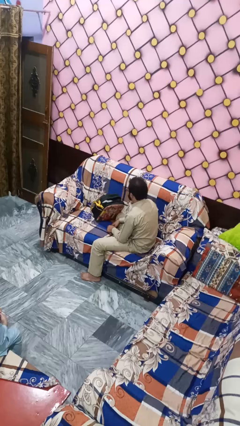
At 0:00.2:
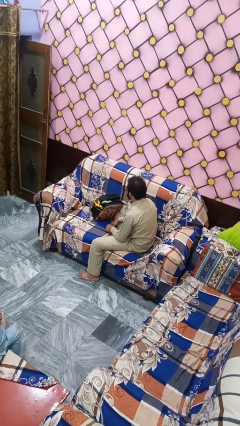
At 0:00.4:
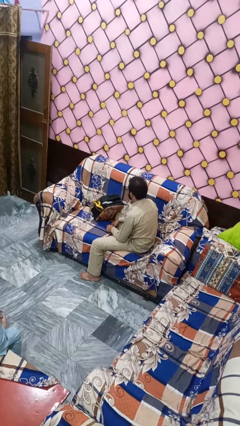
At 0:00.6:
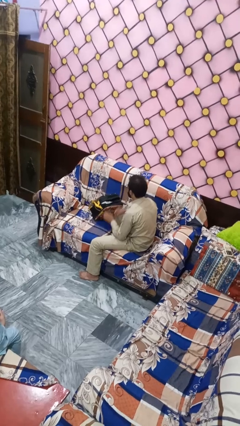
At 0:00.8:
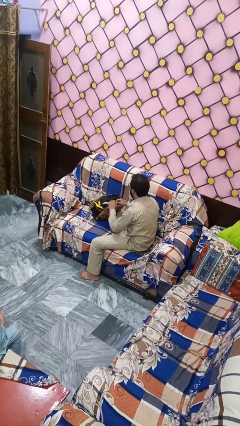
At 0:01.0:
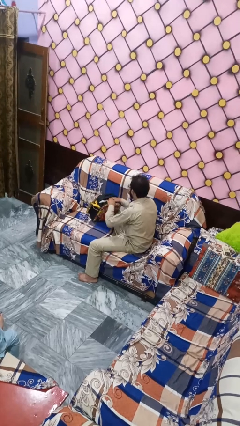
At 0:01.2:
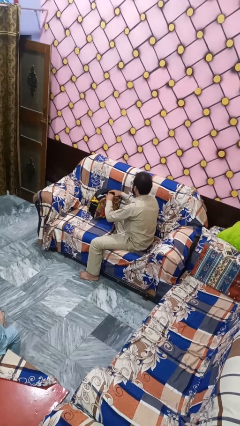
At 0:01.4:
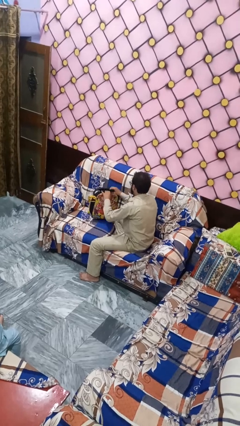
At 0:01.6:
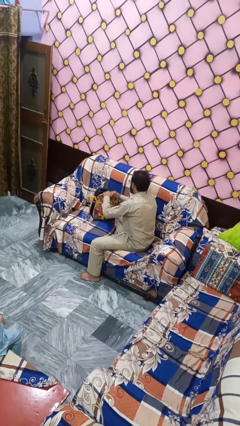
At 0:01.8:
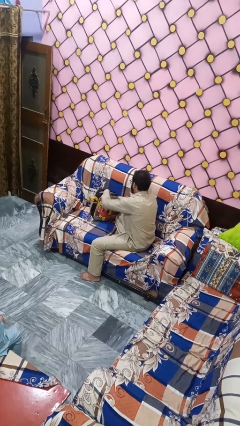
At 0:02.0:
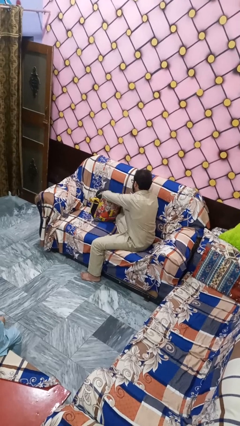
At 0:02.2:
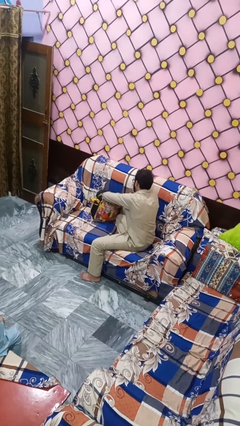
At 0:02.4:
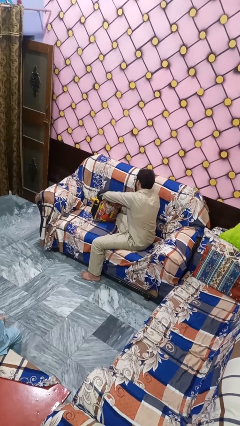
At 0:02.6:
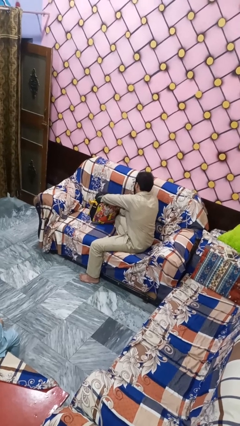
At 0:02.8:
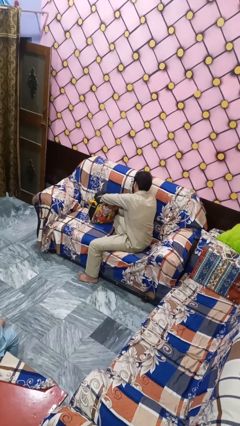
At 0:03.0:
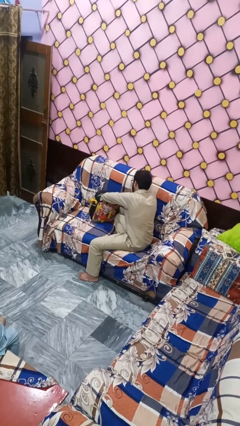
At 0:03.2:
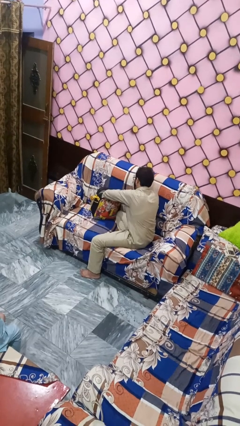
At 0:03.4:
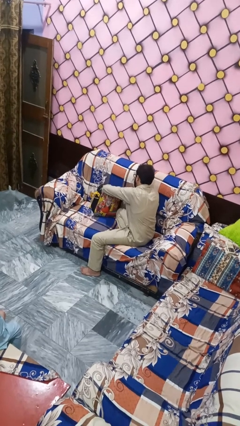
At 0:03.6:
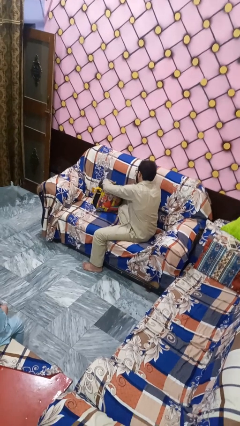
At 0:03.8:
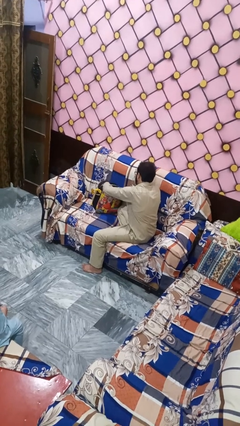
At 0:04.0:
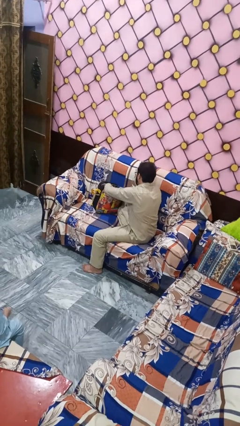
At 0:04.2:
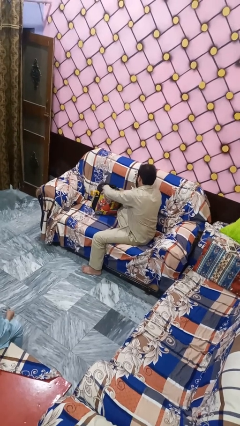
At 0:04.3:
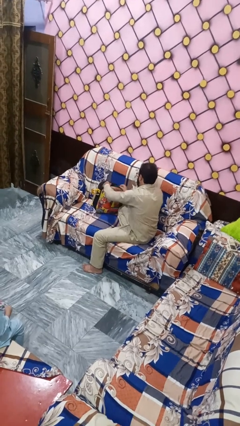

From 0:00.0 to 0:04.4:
person searches in bag

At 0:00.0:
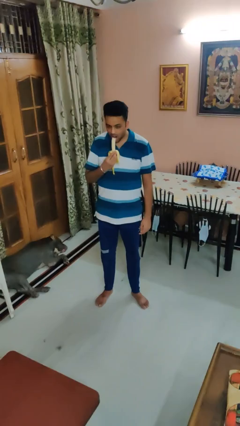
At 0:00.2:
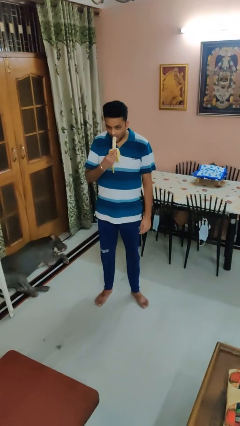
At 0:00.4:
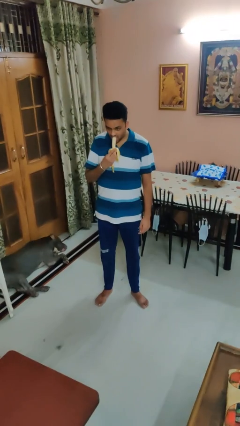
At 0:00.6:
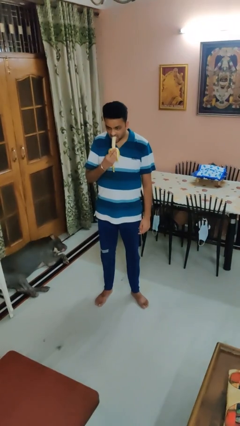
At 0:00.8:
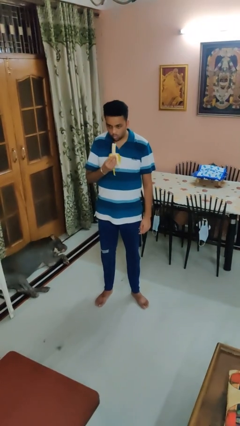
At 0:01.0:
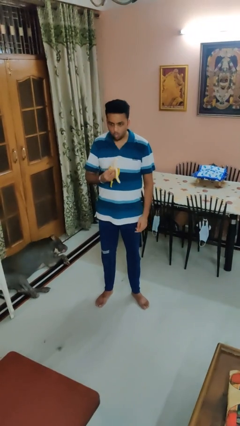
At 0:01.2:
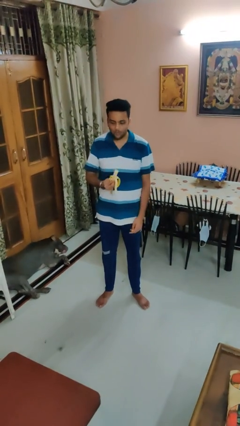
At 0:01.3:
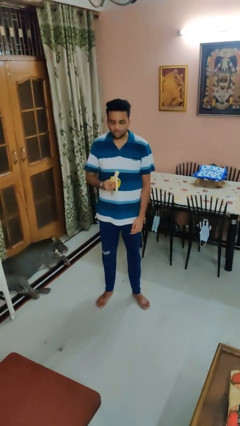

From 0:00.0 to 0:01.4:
person eats banana

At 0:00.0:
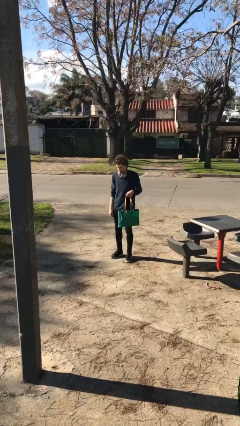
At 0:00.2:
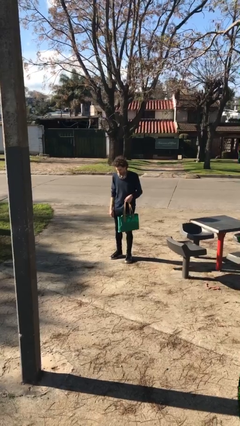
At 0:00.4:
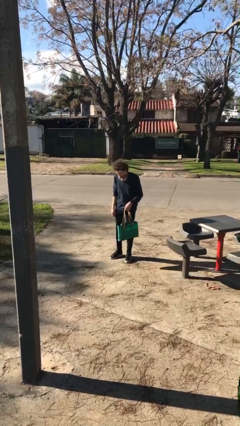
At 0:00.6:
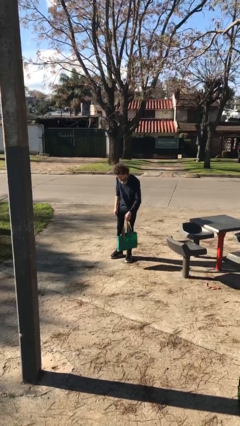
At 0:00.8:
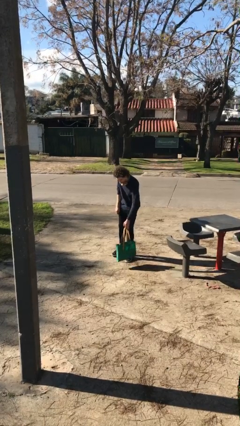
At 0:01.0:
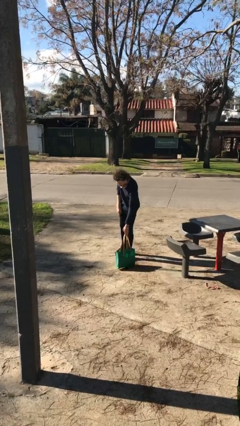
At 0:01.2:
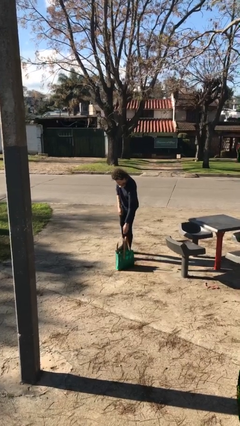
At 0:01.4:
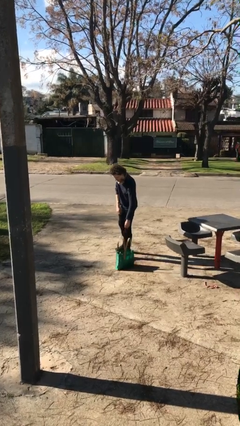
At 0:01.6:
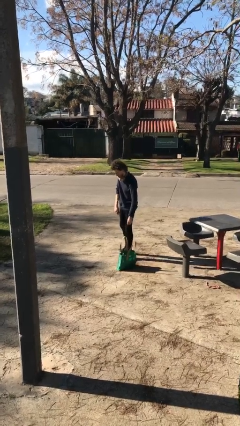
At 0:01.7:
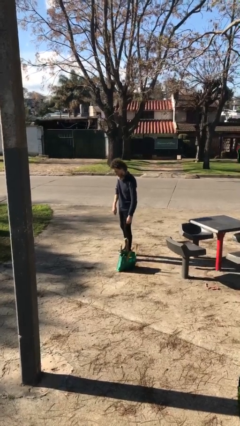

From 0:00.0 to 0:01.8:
person puts down object on floor

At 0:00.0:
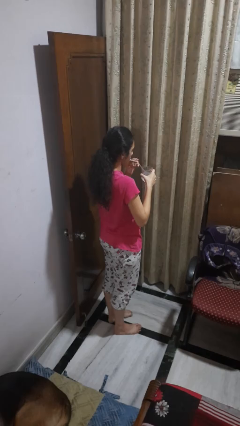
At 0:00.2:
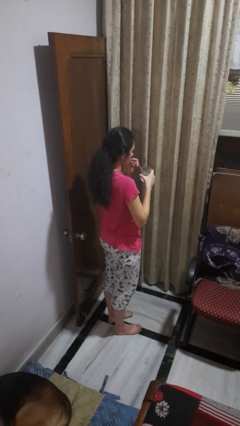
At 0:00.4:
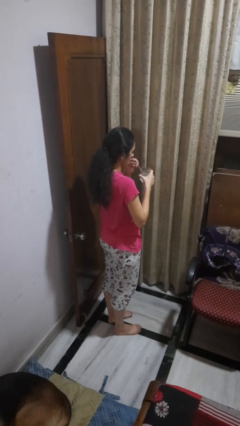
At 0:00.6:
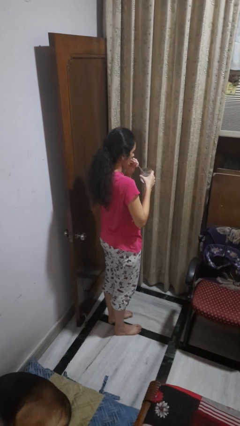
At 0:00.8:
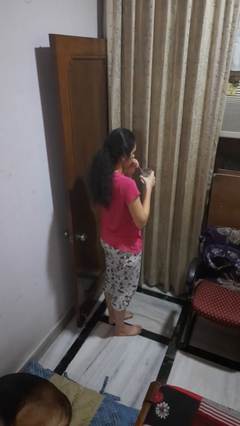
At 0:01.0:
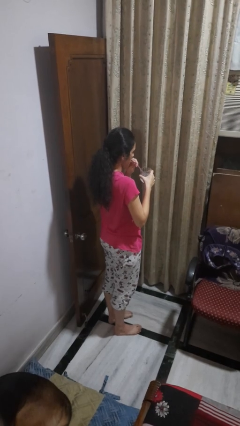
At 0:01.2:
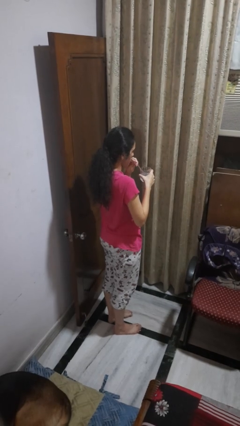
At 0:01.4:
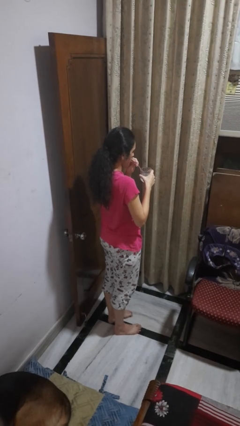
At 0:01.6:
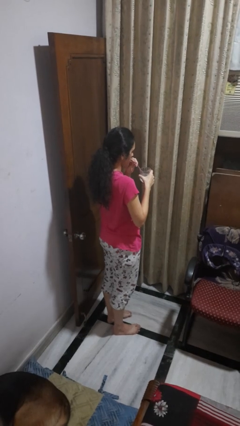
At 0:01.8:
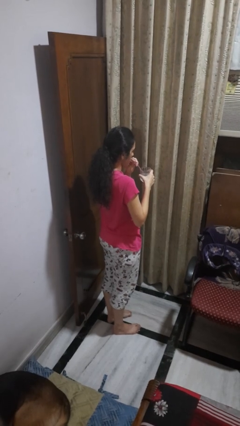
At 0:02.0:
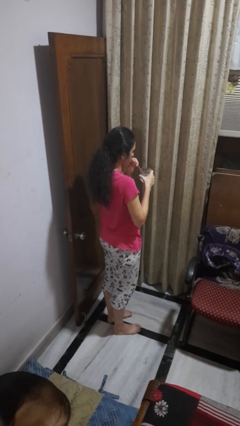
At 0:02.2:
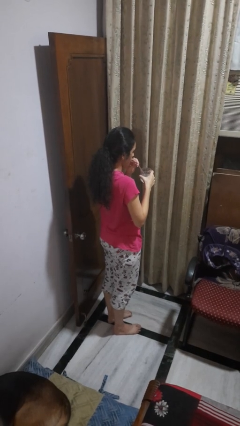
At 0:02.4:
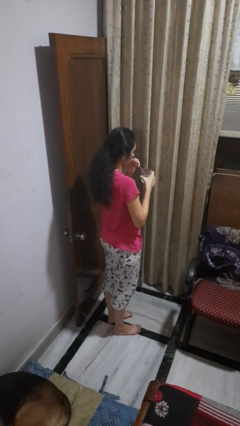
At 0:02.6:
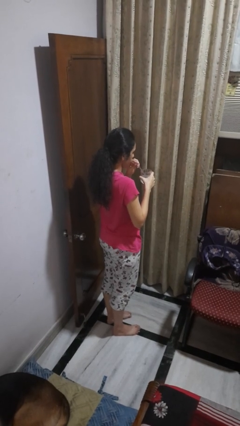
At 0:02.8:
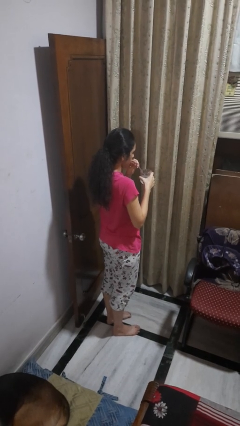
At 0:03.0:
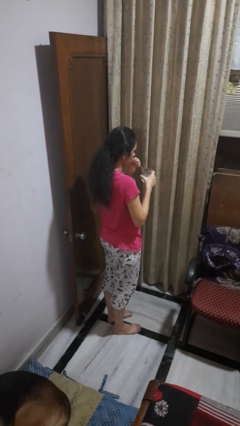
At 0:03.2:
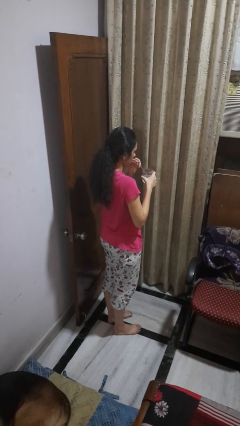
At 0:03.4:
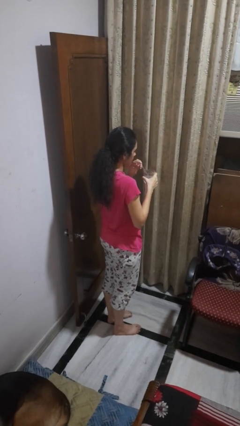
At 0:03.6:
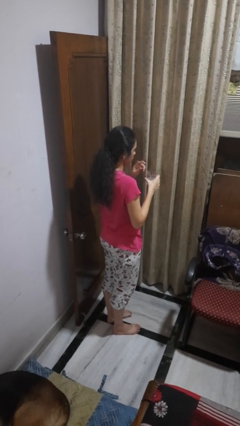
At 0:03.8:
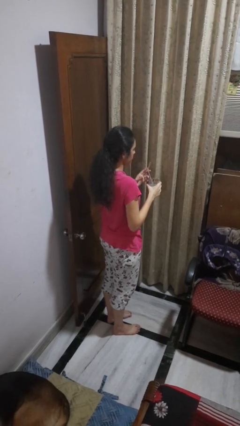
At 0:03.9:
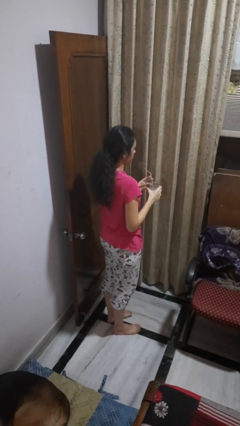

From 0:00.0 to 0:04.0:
person drinks from straw

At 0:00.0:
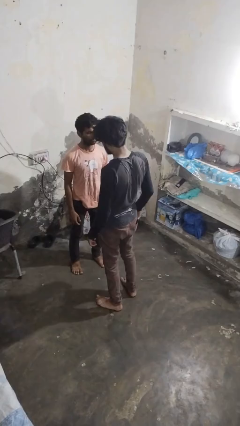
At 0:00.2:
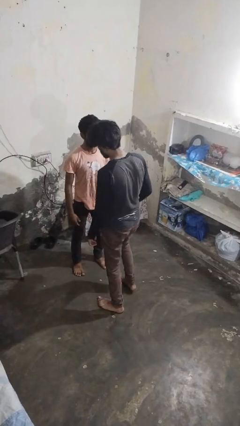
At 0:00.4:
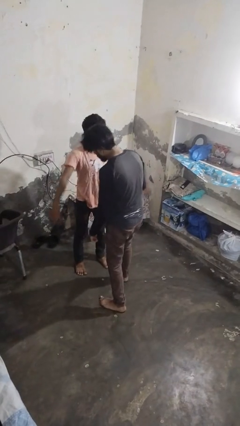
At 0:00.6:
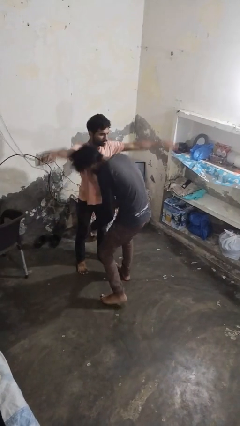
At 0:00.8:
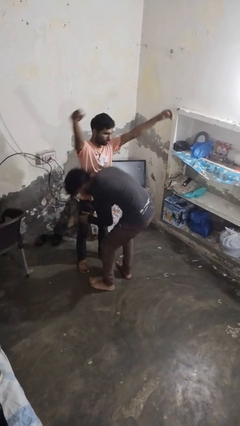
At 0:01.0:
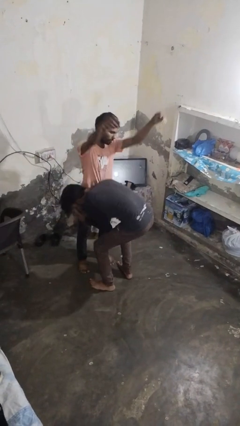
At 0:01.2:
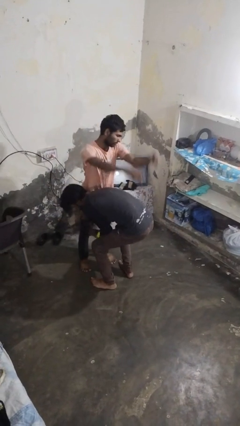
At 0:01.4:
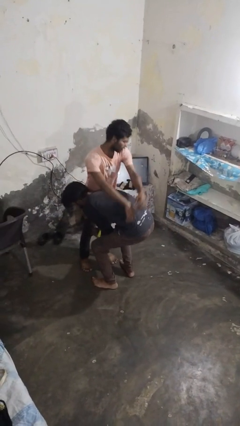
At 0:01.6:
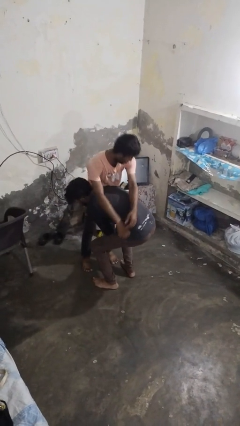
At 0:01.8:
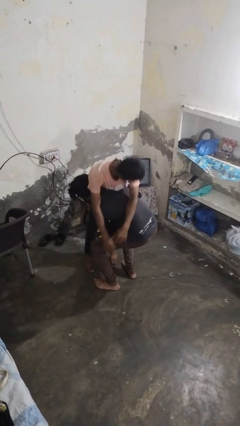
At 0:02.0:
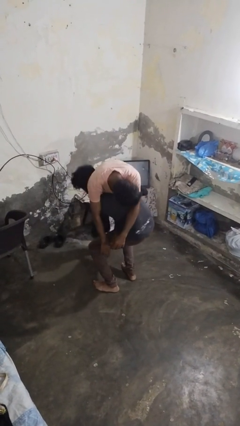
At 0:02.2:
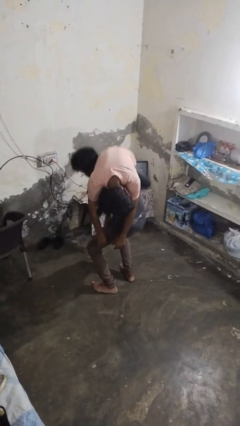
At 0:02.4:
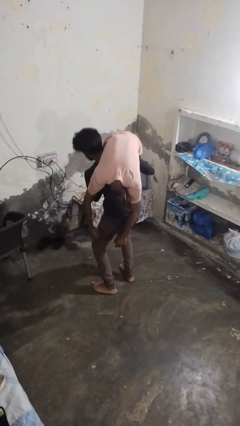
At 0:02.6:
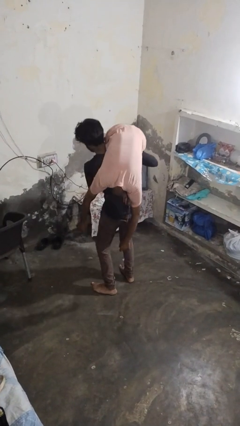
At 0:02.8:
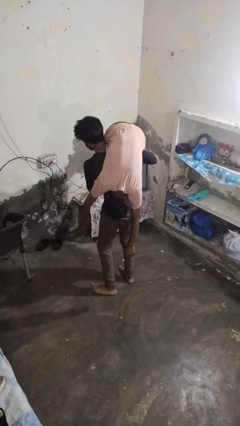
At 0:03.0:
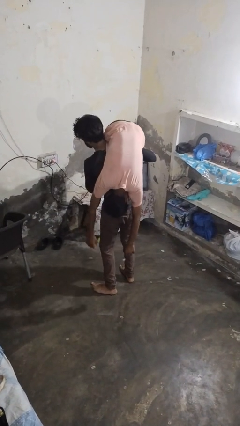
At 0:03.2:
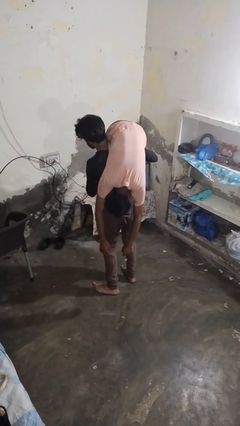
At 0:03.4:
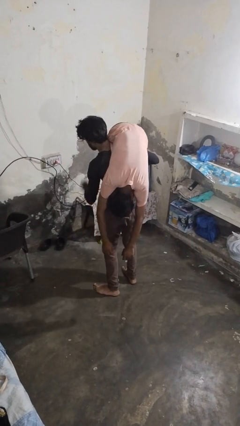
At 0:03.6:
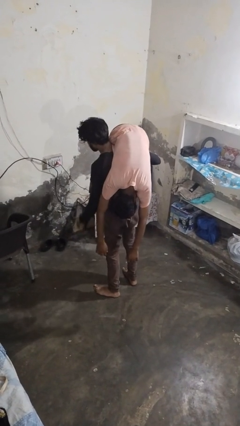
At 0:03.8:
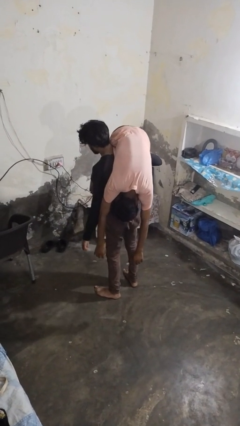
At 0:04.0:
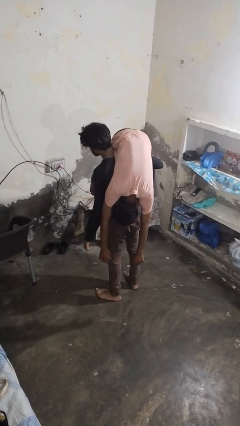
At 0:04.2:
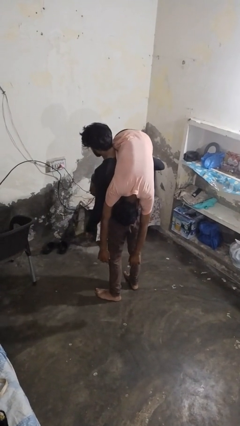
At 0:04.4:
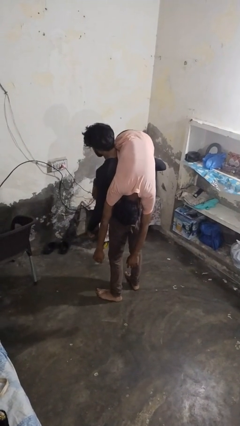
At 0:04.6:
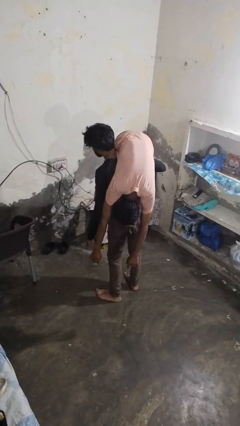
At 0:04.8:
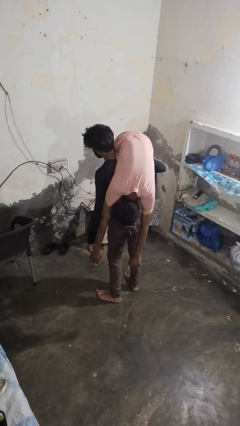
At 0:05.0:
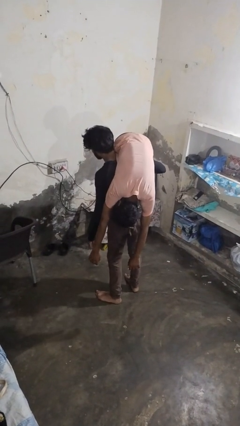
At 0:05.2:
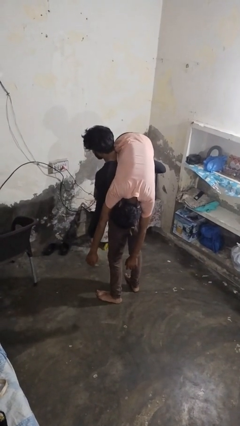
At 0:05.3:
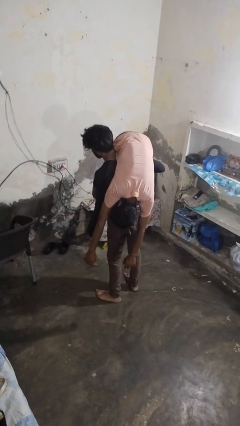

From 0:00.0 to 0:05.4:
person carries person over shoulder

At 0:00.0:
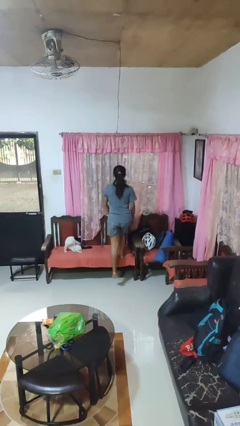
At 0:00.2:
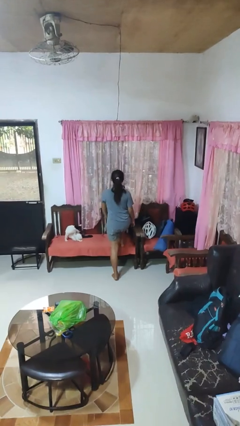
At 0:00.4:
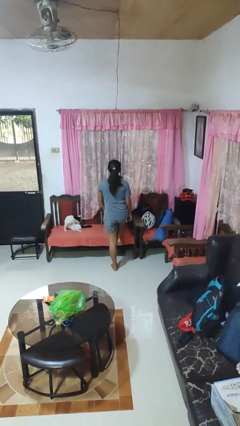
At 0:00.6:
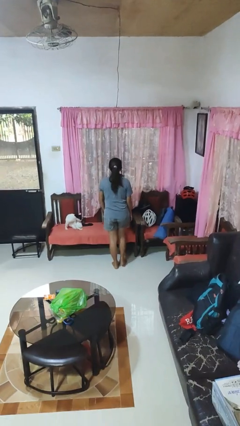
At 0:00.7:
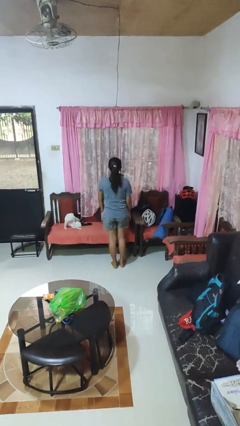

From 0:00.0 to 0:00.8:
person climbs off chair
